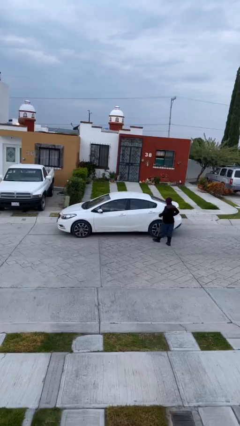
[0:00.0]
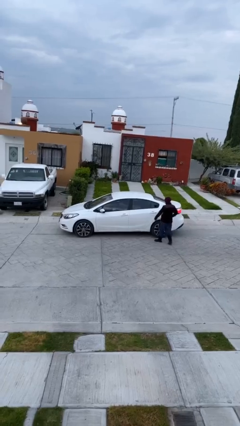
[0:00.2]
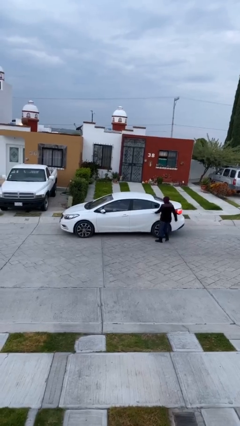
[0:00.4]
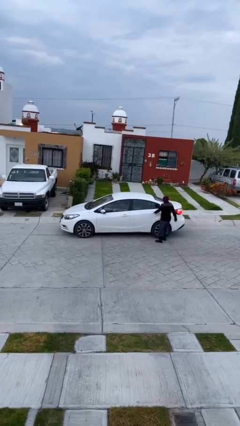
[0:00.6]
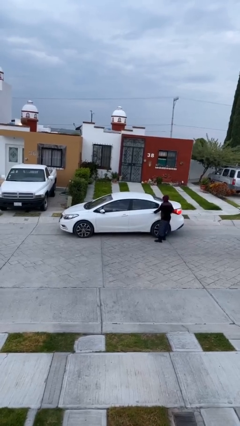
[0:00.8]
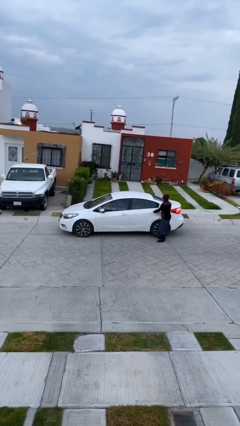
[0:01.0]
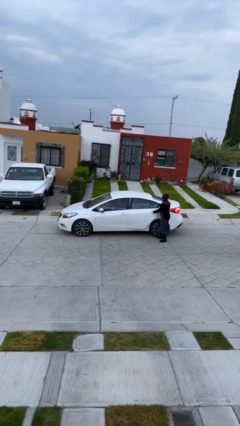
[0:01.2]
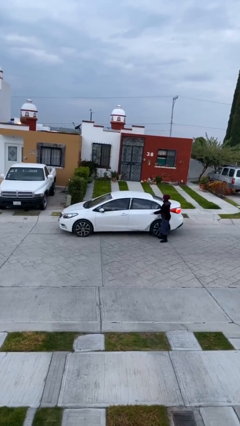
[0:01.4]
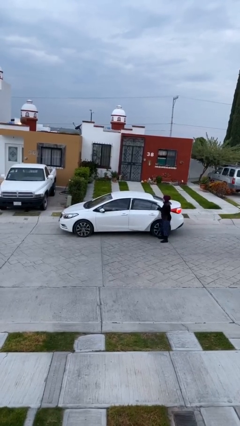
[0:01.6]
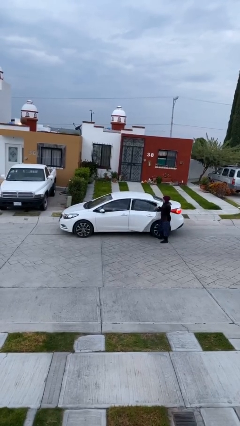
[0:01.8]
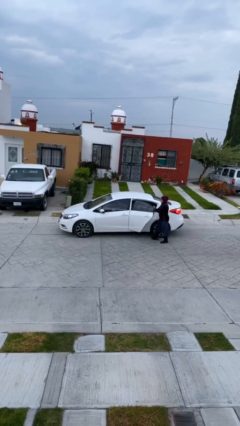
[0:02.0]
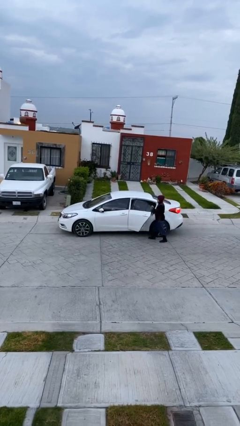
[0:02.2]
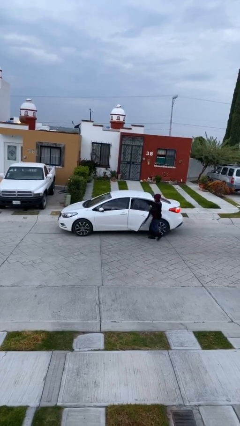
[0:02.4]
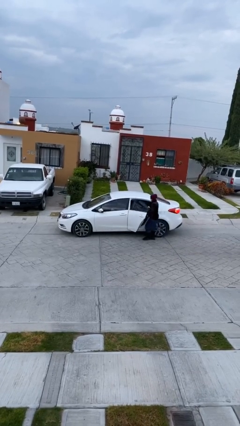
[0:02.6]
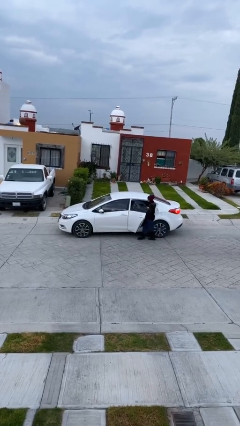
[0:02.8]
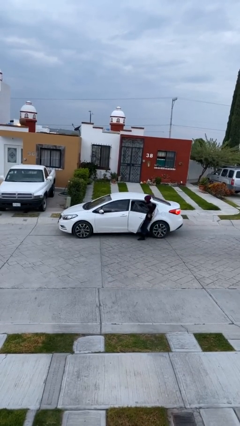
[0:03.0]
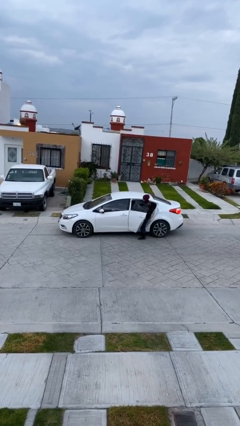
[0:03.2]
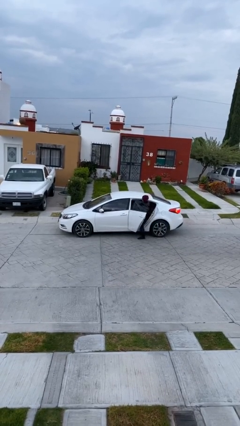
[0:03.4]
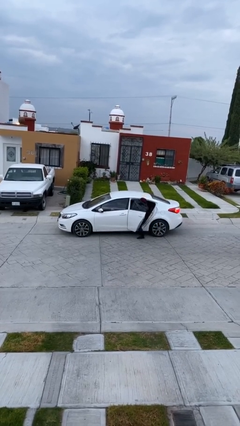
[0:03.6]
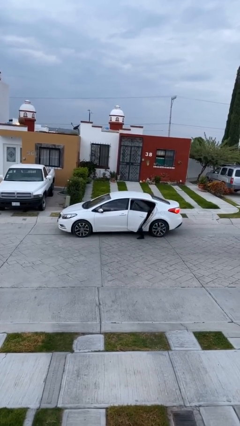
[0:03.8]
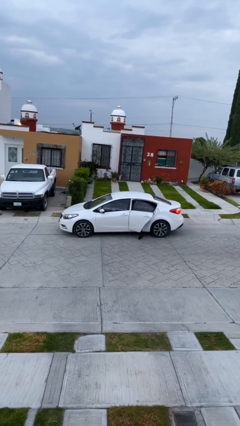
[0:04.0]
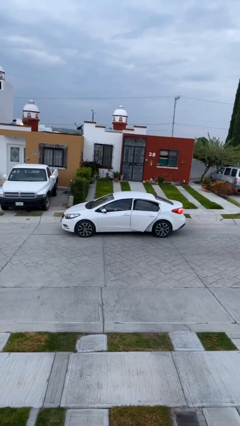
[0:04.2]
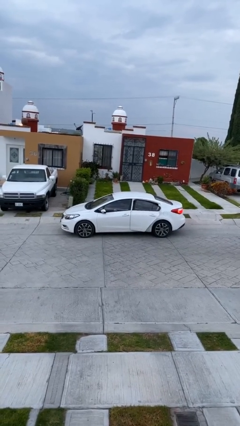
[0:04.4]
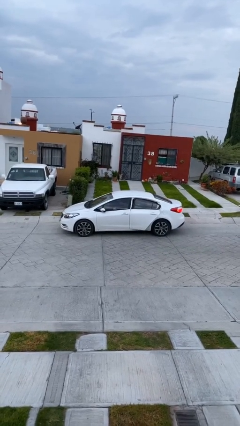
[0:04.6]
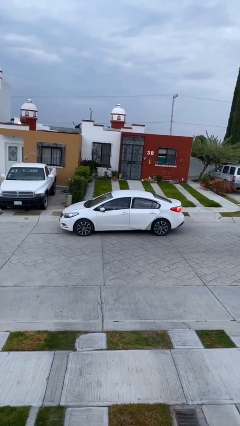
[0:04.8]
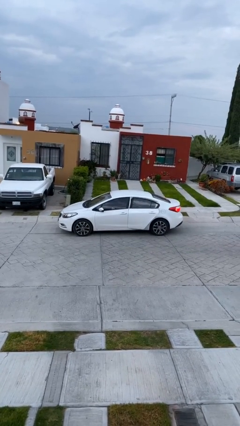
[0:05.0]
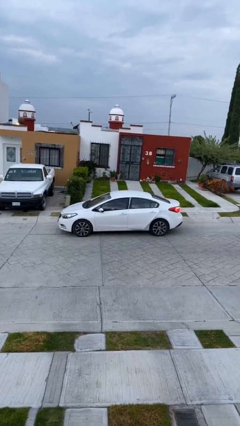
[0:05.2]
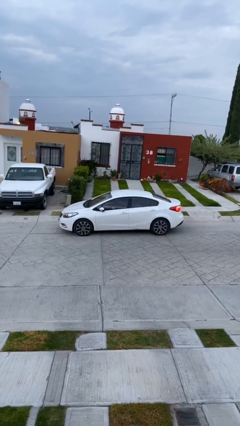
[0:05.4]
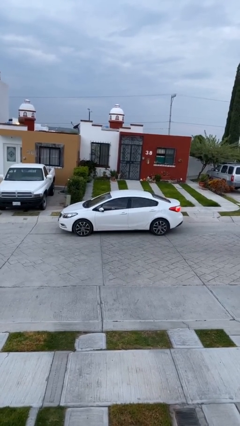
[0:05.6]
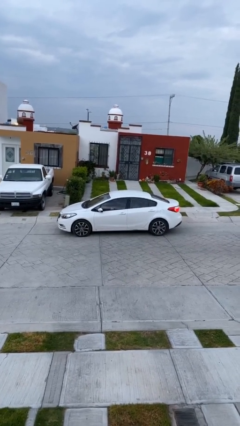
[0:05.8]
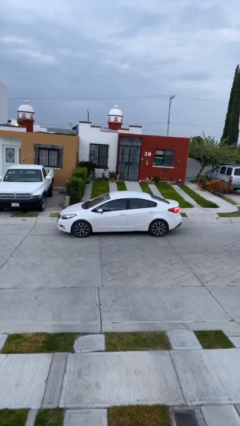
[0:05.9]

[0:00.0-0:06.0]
car picks up person

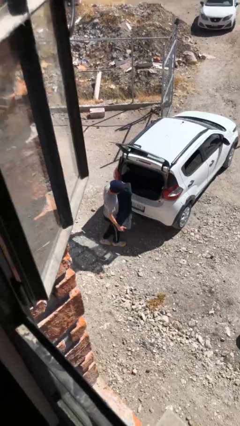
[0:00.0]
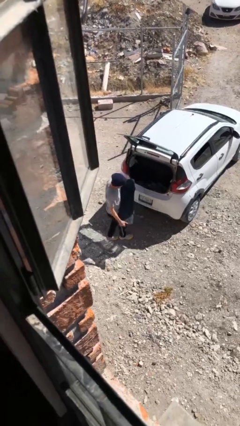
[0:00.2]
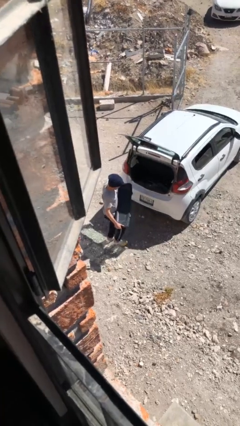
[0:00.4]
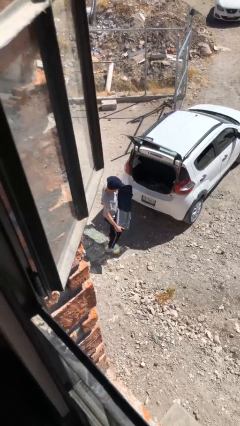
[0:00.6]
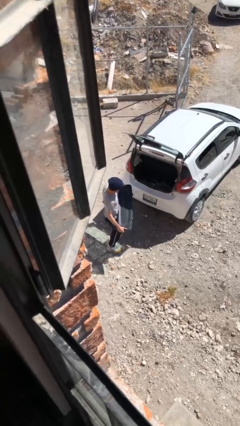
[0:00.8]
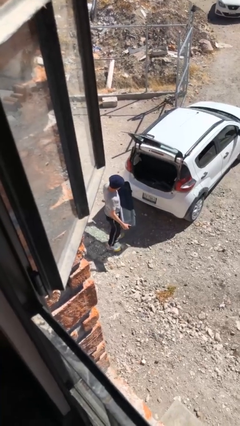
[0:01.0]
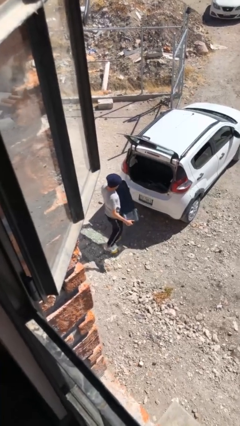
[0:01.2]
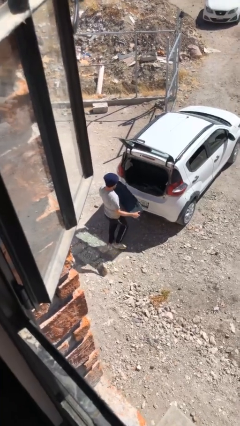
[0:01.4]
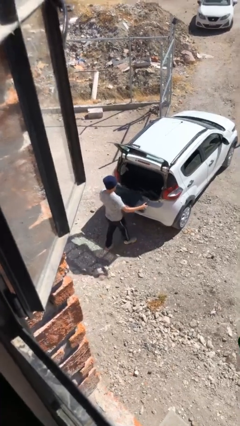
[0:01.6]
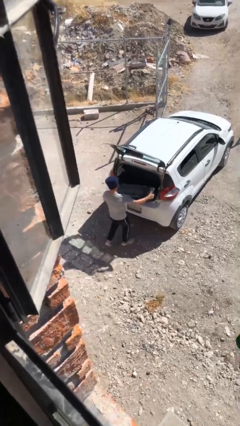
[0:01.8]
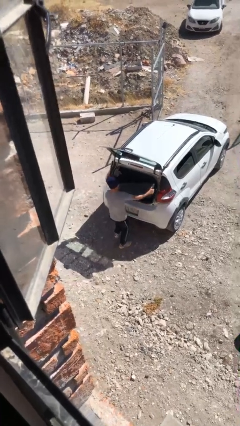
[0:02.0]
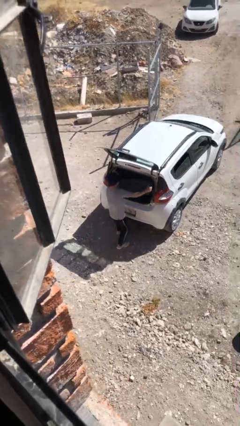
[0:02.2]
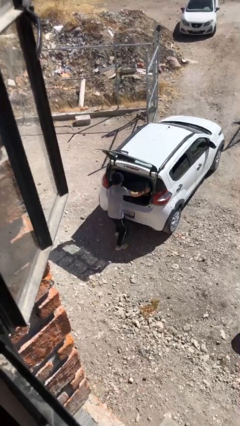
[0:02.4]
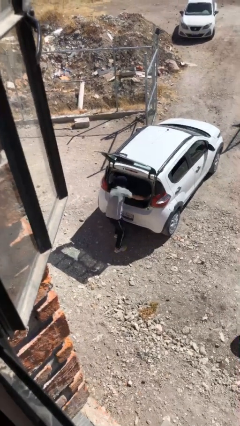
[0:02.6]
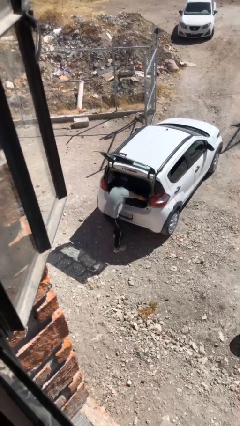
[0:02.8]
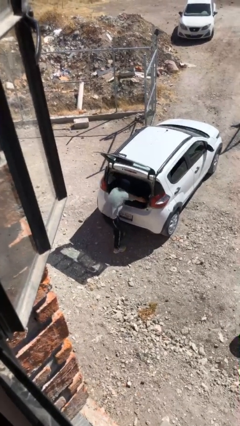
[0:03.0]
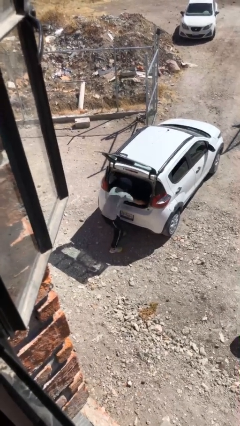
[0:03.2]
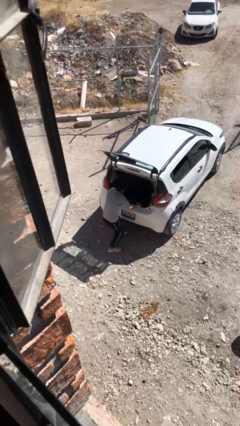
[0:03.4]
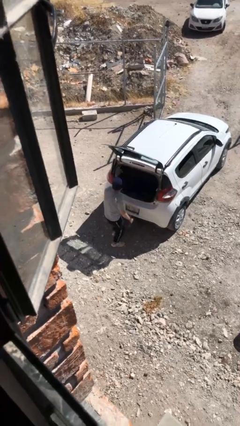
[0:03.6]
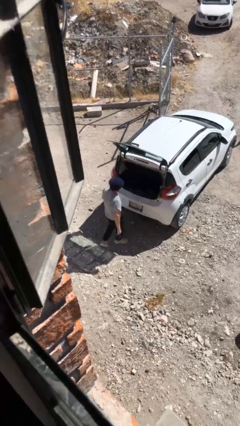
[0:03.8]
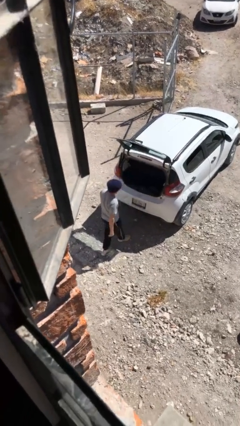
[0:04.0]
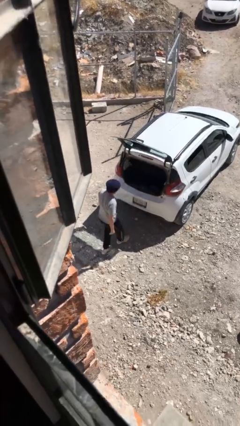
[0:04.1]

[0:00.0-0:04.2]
person loads car

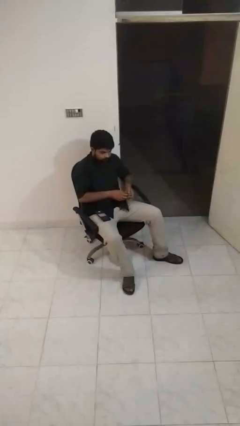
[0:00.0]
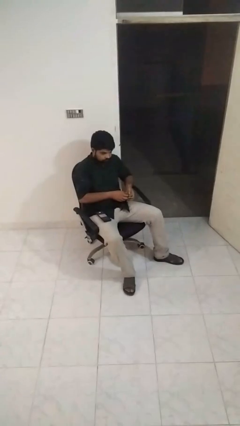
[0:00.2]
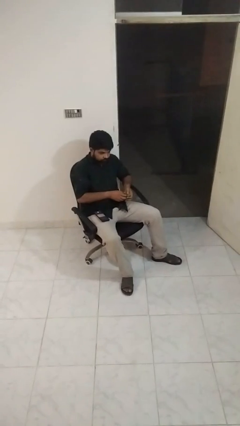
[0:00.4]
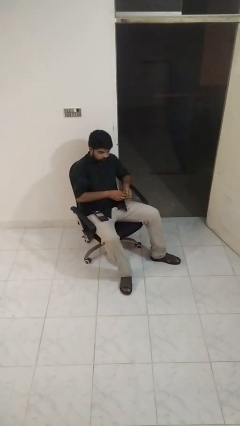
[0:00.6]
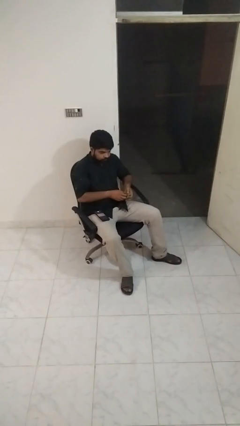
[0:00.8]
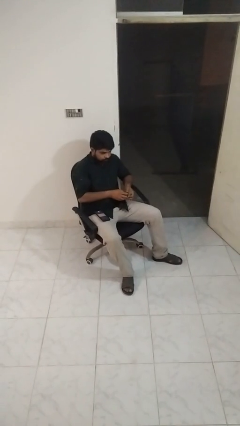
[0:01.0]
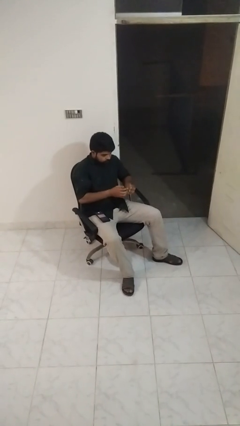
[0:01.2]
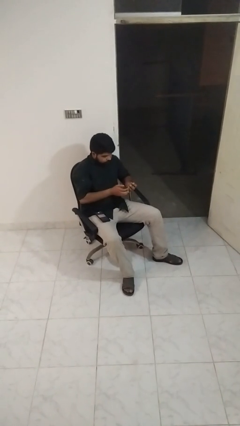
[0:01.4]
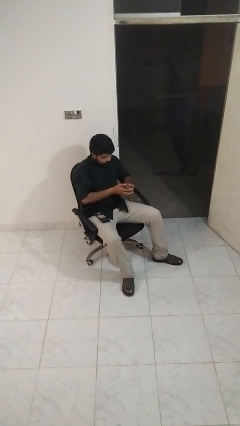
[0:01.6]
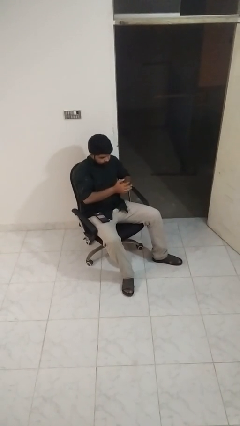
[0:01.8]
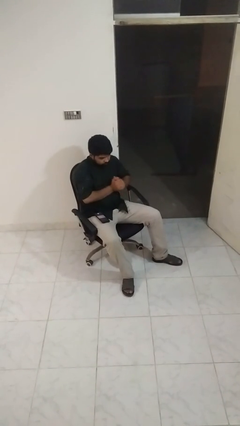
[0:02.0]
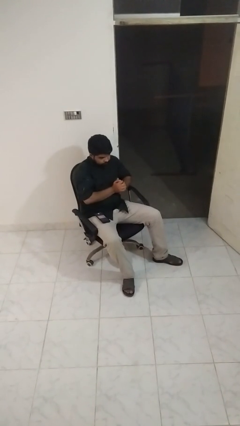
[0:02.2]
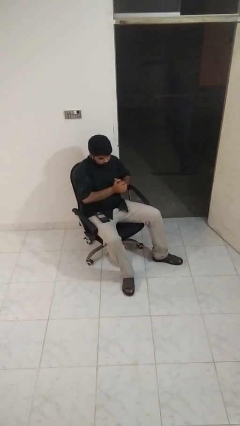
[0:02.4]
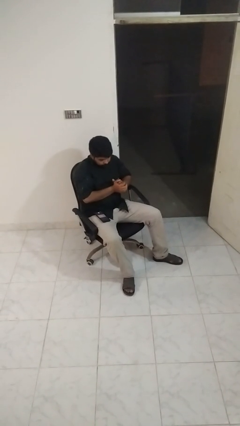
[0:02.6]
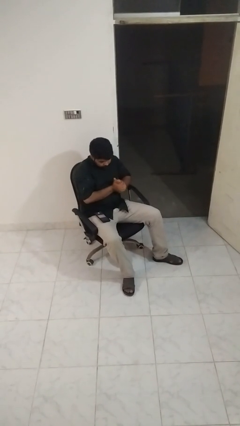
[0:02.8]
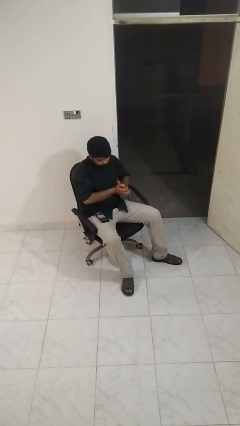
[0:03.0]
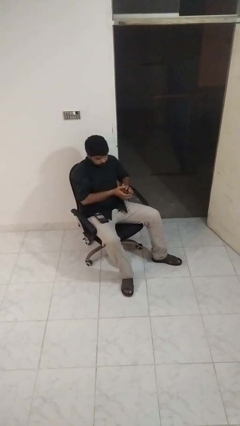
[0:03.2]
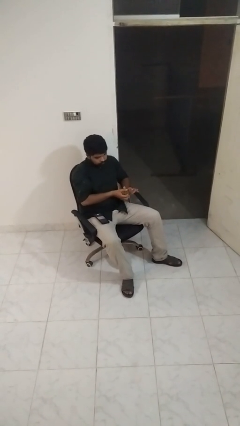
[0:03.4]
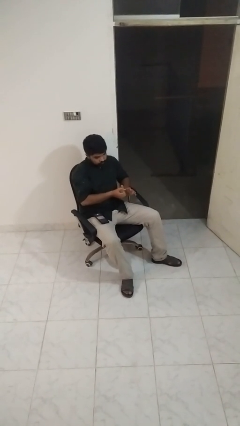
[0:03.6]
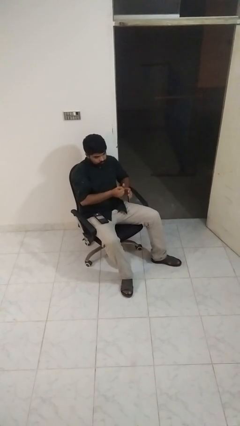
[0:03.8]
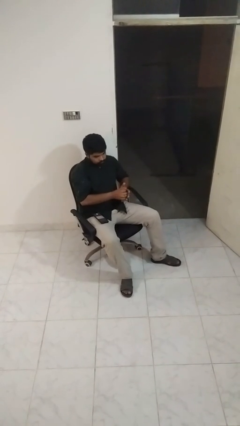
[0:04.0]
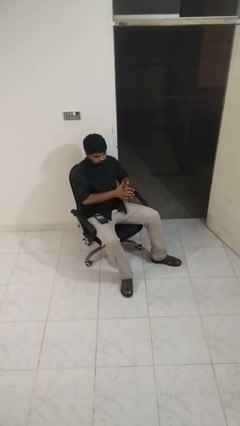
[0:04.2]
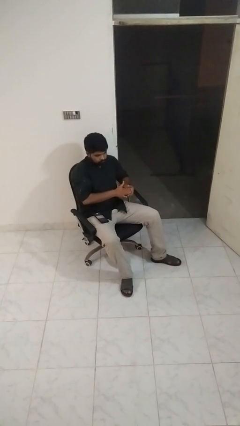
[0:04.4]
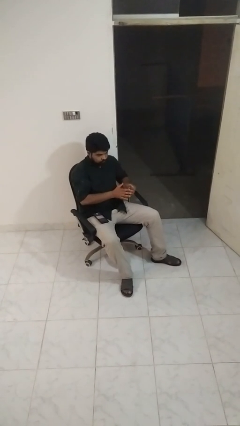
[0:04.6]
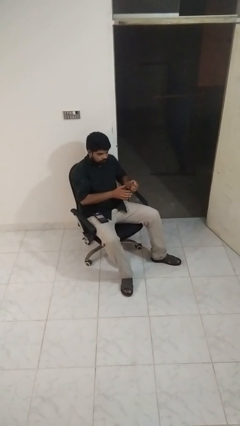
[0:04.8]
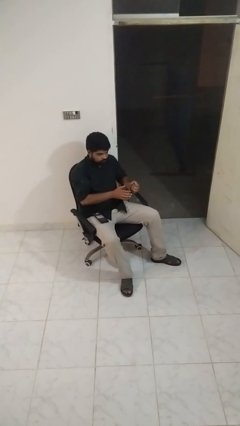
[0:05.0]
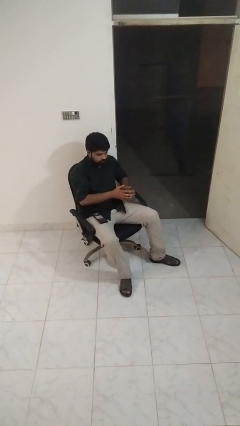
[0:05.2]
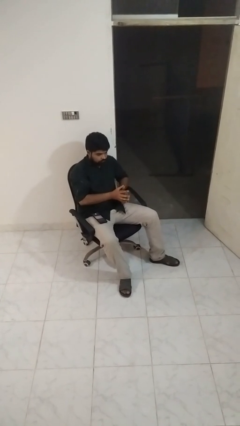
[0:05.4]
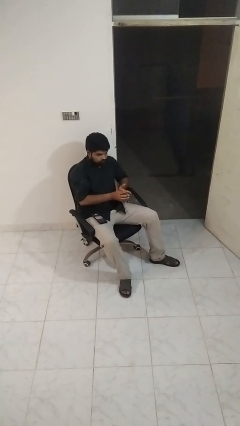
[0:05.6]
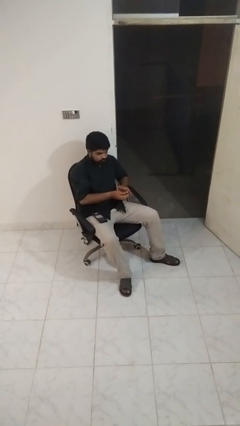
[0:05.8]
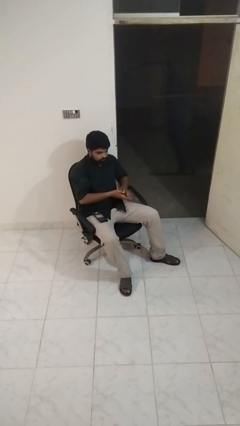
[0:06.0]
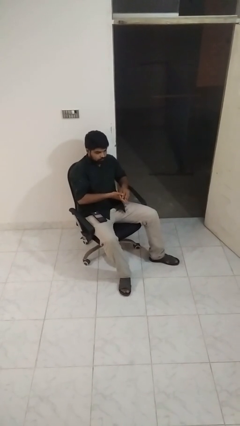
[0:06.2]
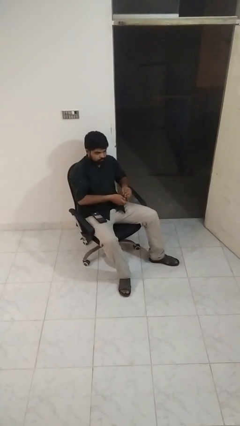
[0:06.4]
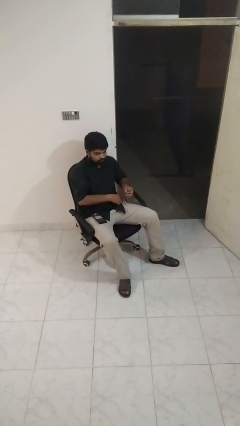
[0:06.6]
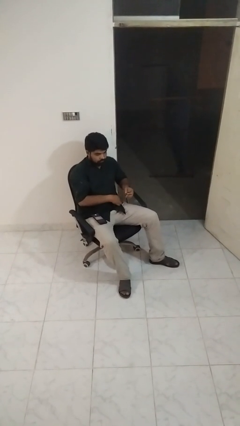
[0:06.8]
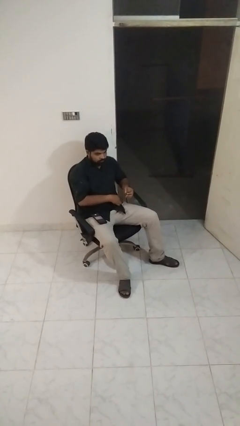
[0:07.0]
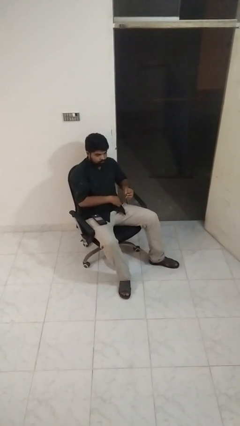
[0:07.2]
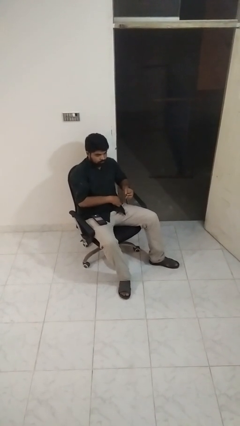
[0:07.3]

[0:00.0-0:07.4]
person squeezes object
